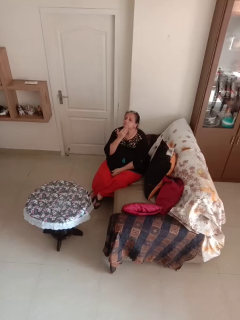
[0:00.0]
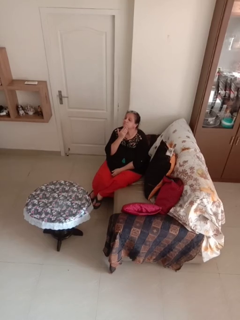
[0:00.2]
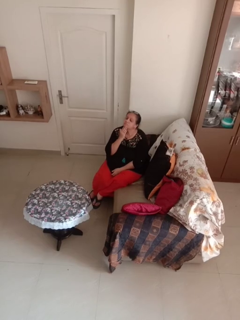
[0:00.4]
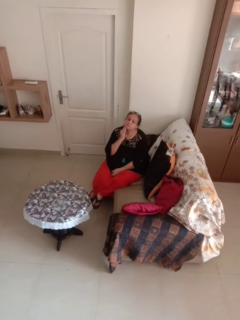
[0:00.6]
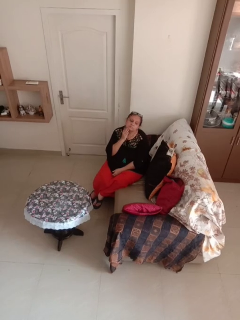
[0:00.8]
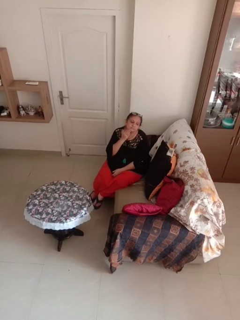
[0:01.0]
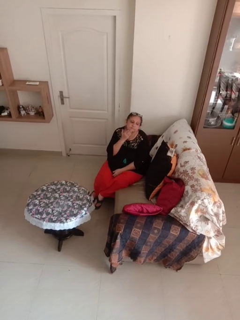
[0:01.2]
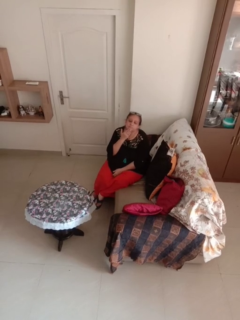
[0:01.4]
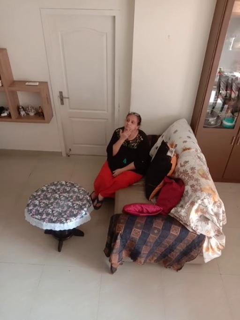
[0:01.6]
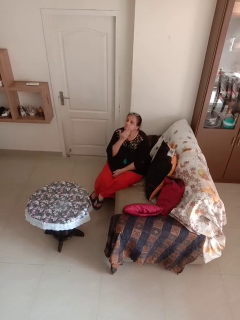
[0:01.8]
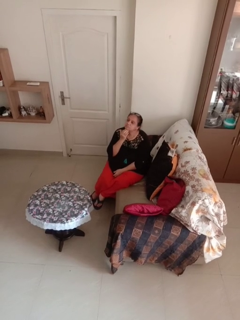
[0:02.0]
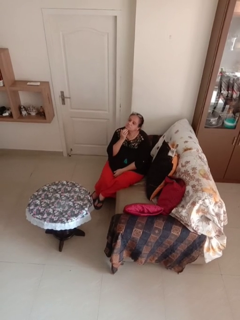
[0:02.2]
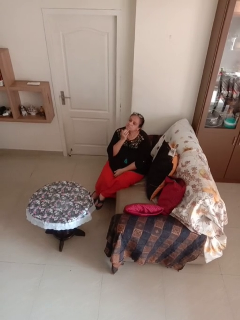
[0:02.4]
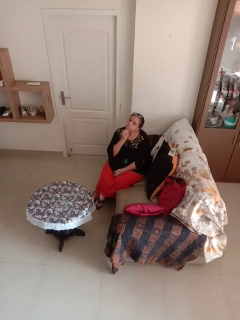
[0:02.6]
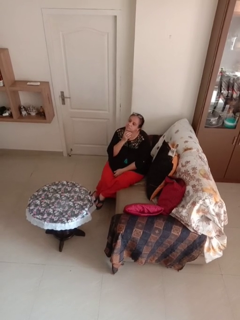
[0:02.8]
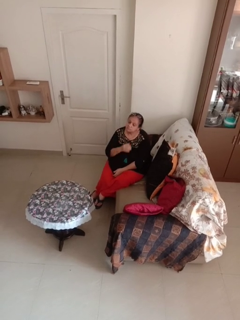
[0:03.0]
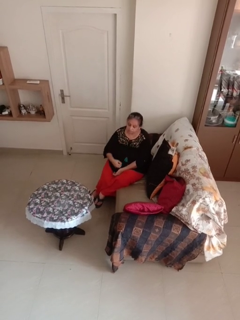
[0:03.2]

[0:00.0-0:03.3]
person strokes chin

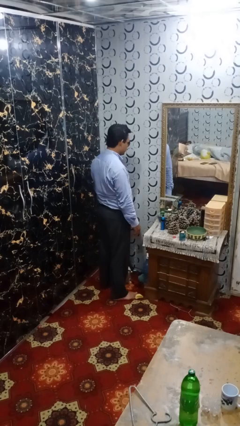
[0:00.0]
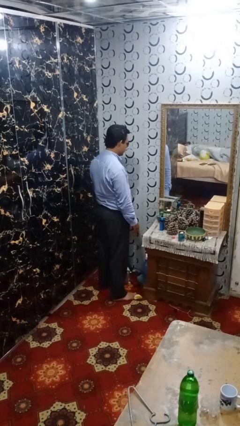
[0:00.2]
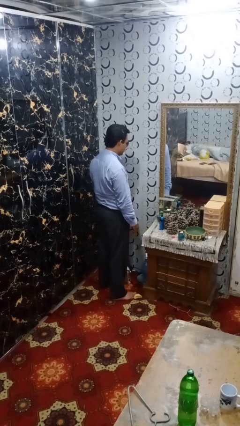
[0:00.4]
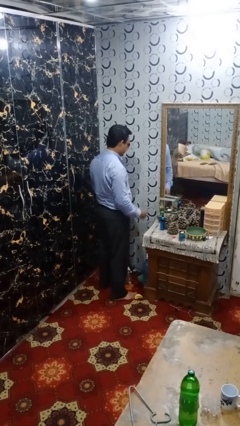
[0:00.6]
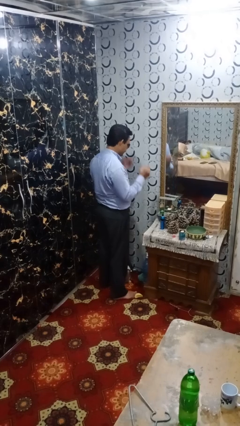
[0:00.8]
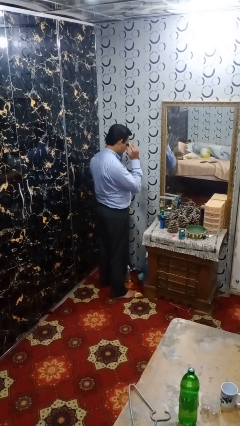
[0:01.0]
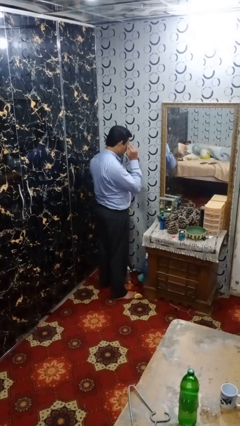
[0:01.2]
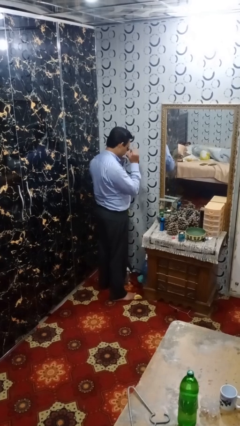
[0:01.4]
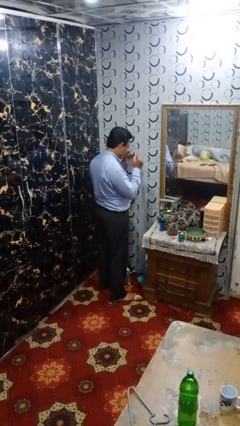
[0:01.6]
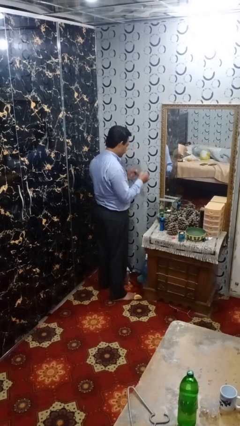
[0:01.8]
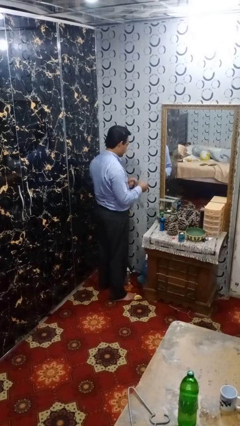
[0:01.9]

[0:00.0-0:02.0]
person takes off sunglasses

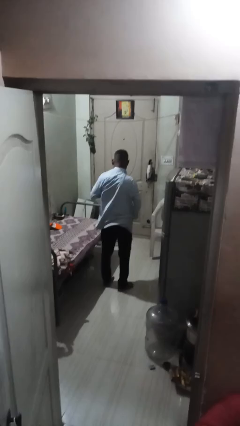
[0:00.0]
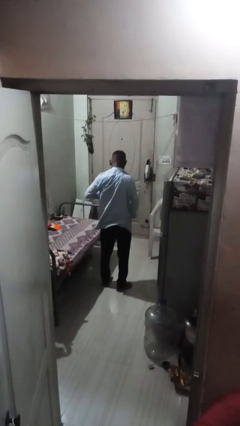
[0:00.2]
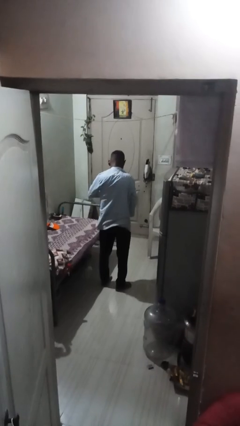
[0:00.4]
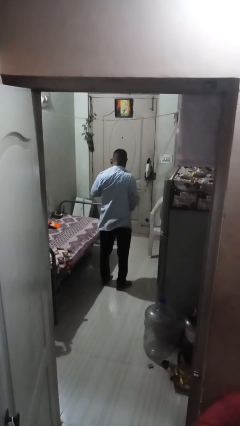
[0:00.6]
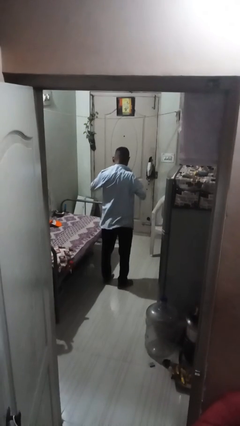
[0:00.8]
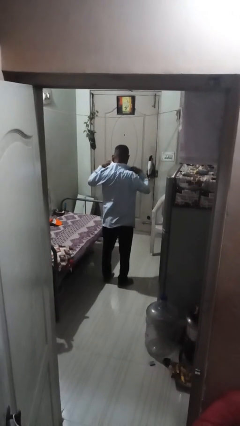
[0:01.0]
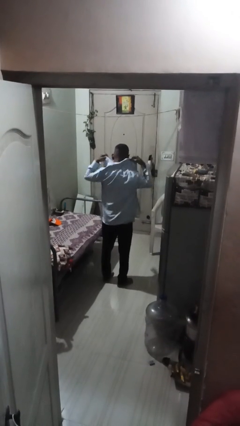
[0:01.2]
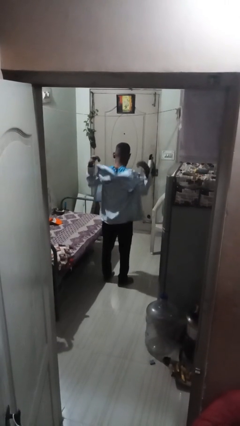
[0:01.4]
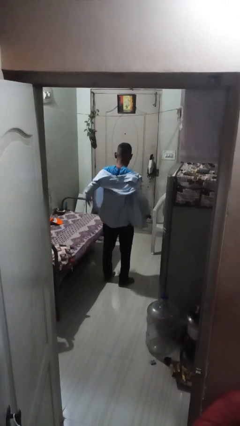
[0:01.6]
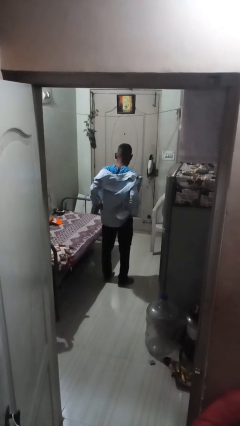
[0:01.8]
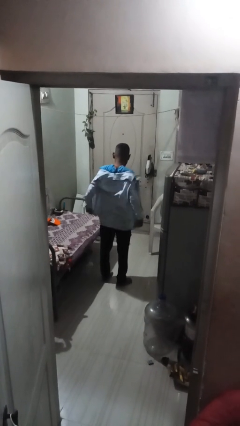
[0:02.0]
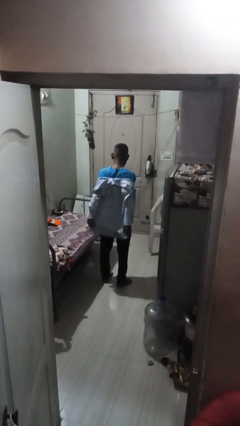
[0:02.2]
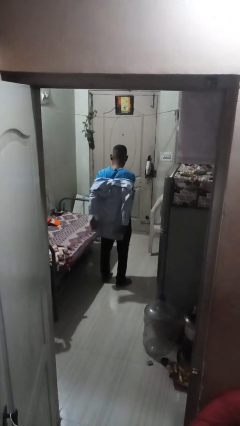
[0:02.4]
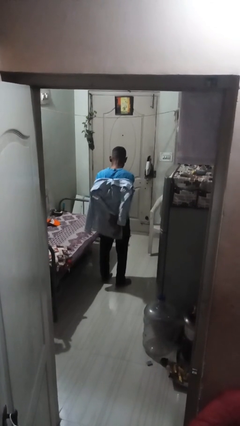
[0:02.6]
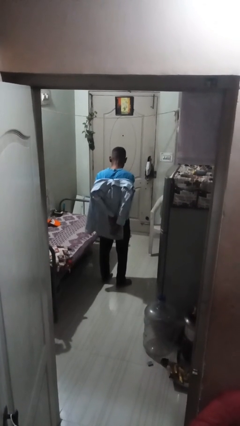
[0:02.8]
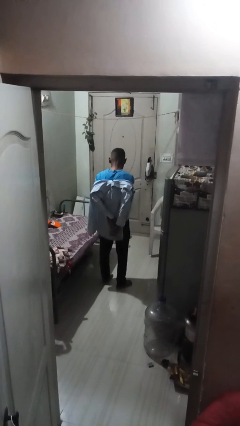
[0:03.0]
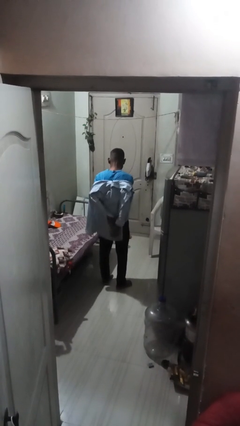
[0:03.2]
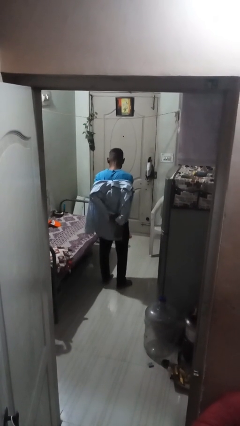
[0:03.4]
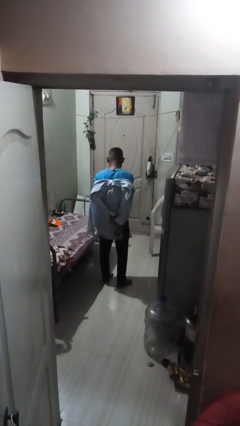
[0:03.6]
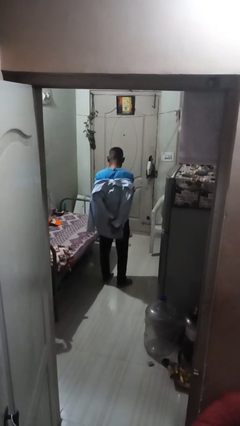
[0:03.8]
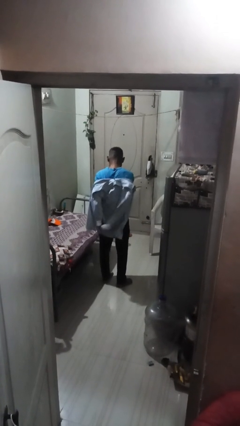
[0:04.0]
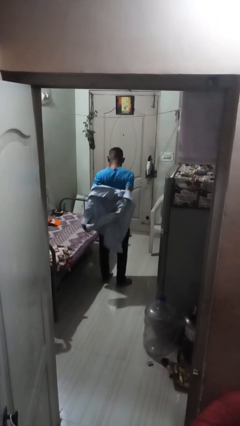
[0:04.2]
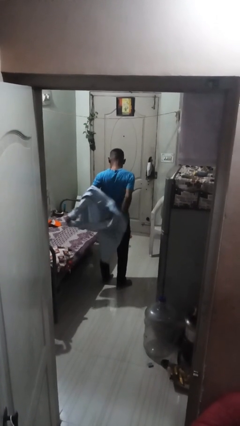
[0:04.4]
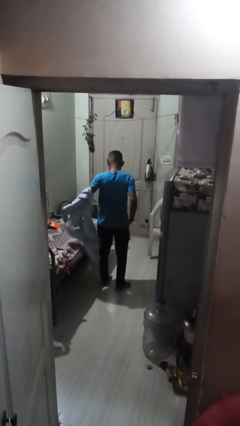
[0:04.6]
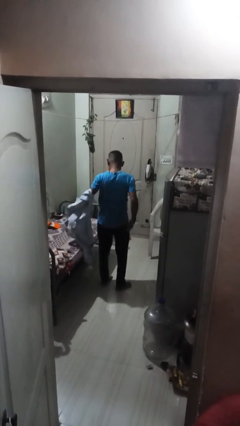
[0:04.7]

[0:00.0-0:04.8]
person takes off shirt

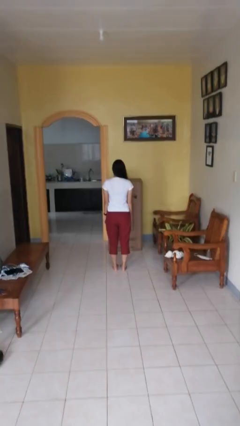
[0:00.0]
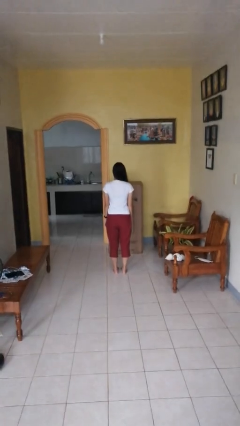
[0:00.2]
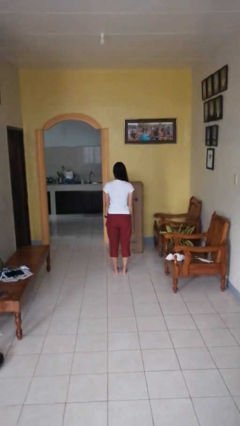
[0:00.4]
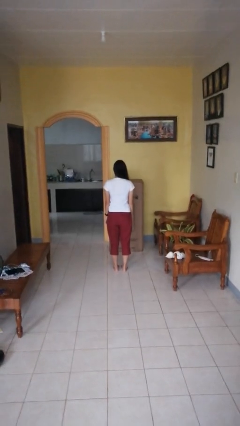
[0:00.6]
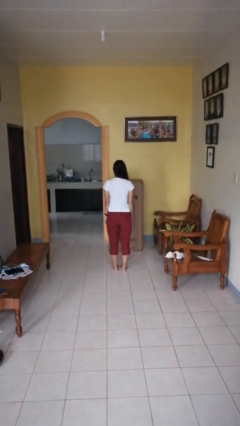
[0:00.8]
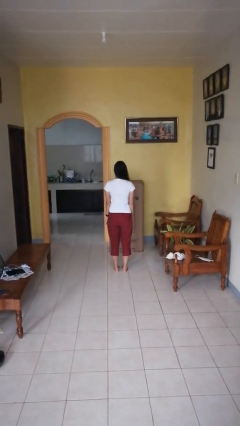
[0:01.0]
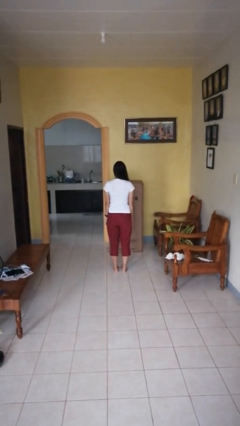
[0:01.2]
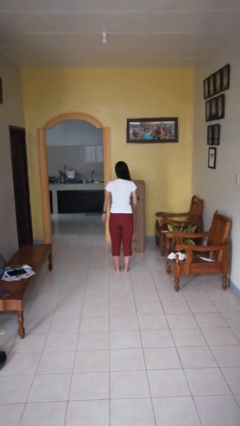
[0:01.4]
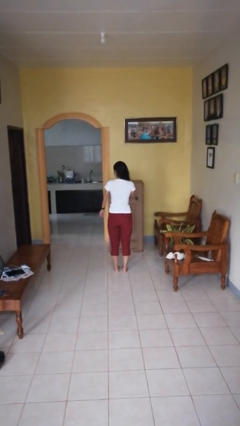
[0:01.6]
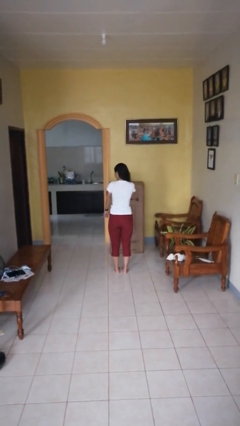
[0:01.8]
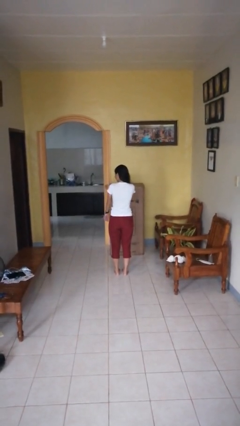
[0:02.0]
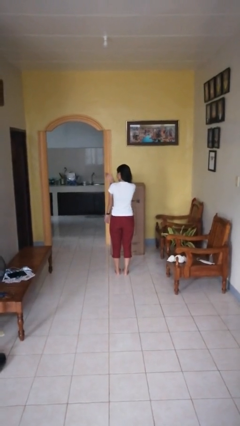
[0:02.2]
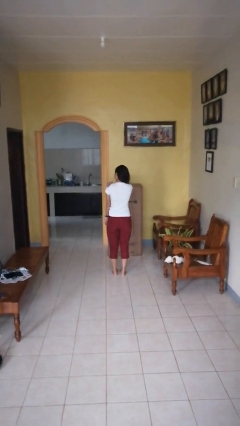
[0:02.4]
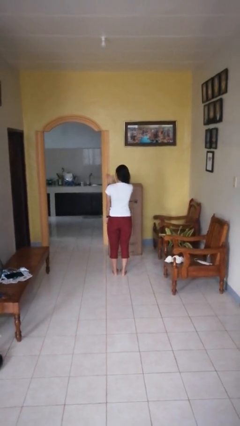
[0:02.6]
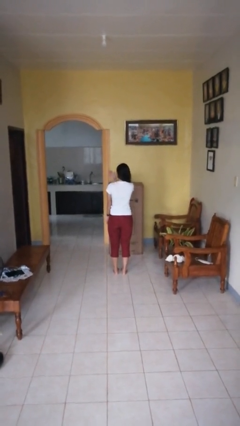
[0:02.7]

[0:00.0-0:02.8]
person swats bug

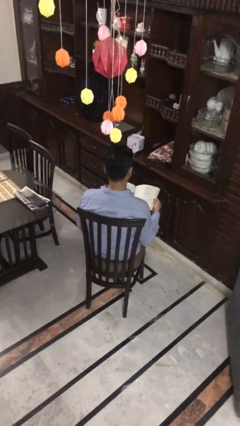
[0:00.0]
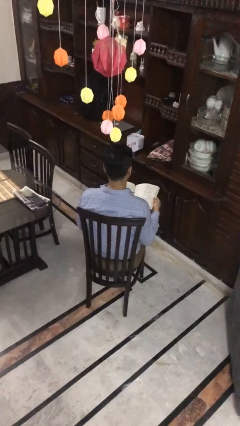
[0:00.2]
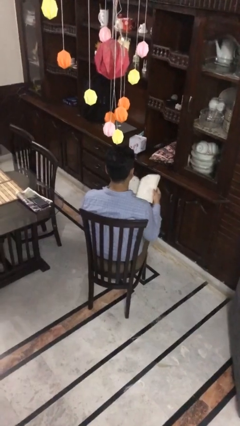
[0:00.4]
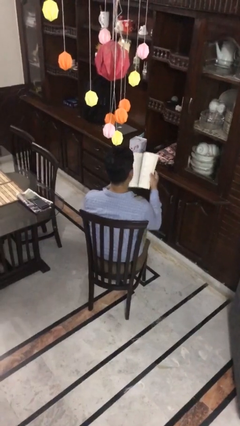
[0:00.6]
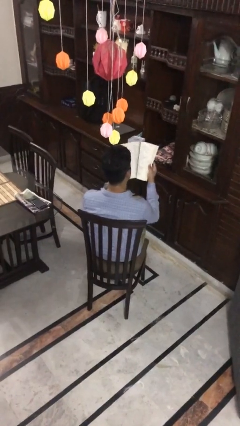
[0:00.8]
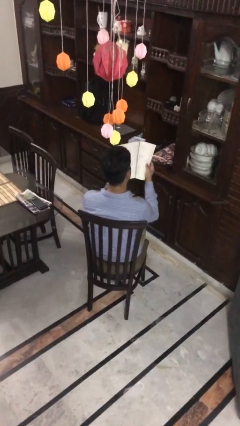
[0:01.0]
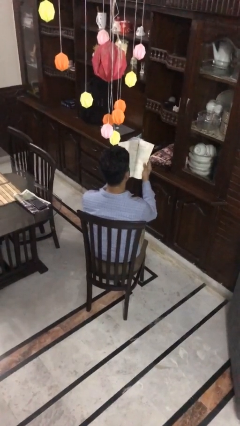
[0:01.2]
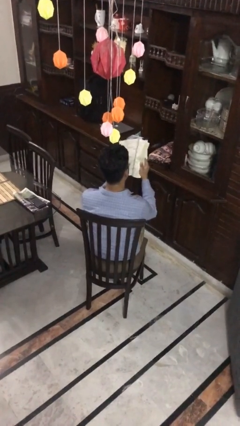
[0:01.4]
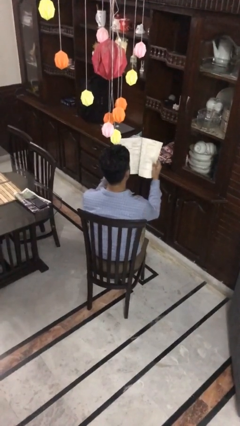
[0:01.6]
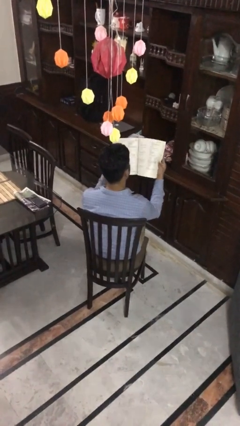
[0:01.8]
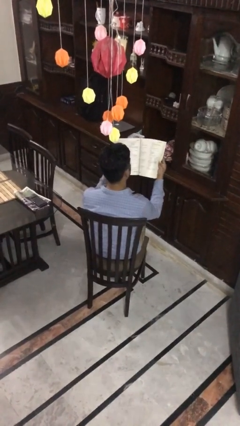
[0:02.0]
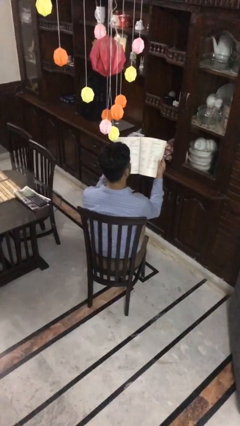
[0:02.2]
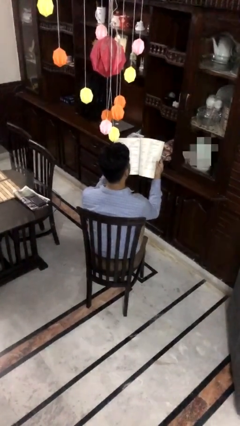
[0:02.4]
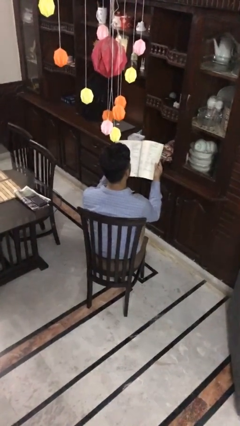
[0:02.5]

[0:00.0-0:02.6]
person reads magazine

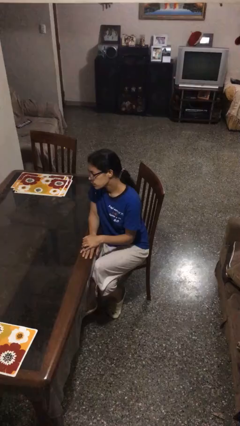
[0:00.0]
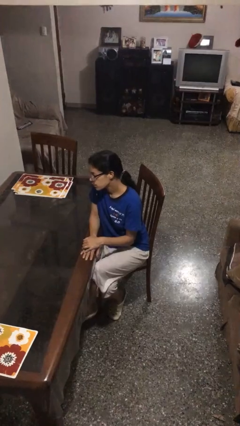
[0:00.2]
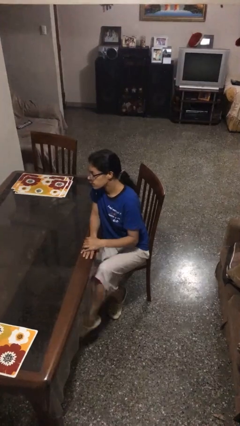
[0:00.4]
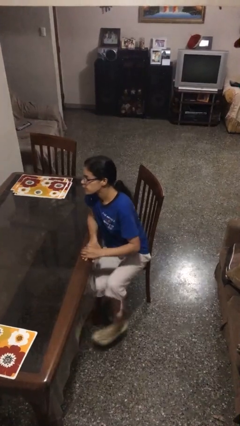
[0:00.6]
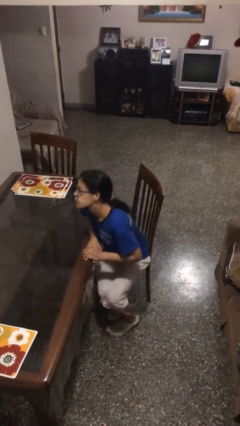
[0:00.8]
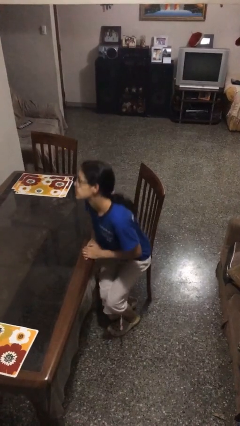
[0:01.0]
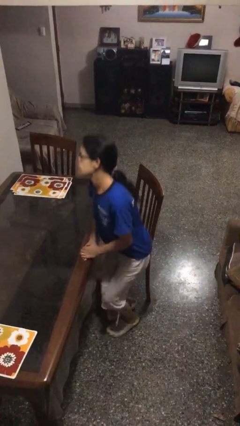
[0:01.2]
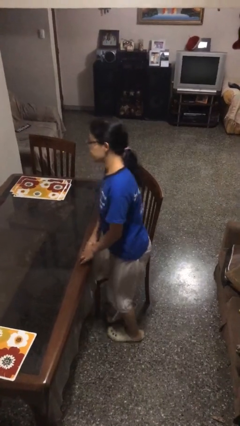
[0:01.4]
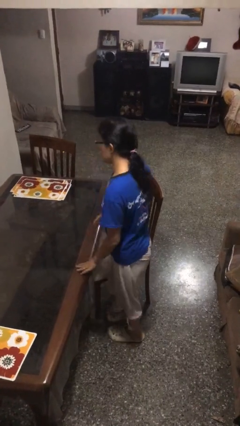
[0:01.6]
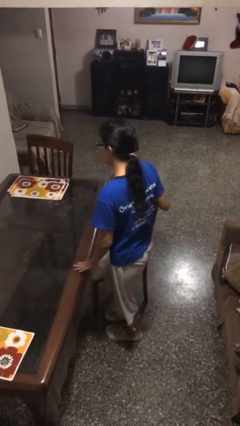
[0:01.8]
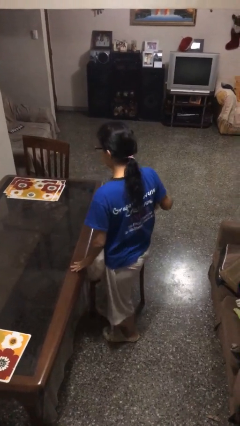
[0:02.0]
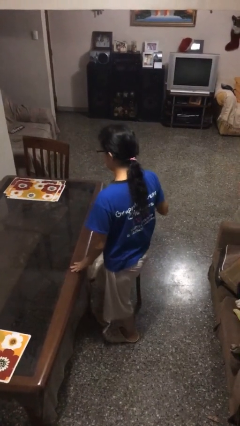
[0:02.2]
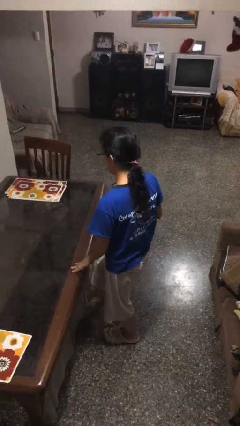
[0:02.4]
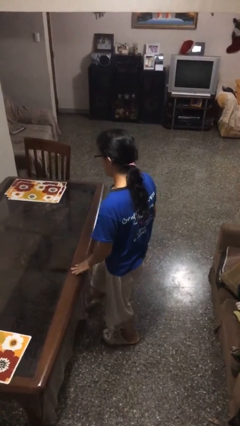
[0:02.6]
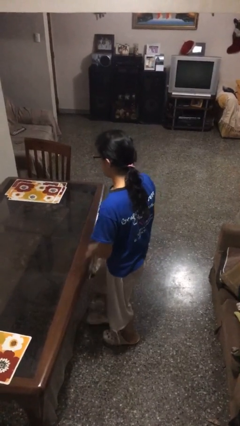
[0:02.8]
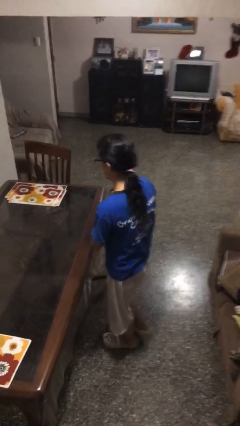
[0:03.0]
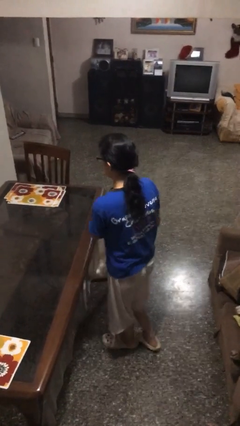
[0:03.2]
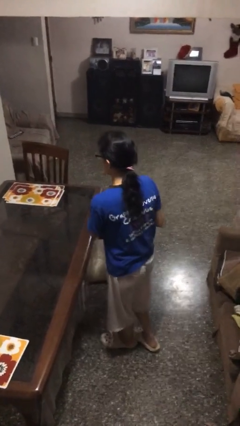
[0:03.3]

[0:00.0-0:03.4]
person stands up
